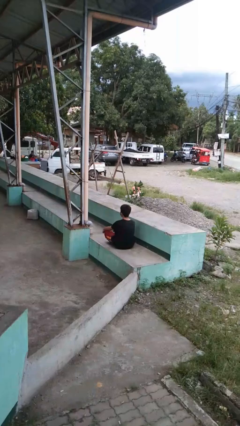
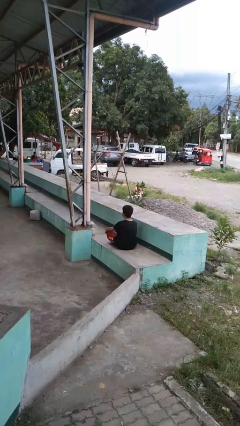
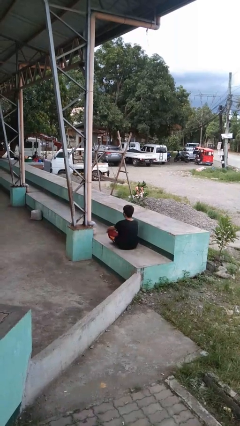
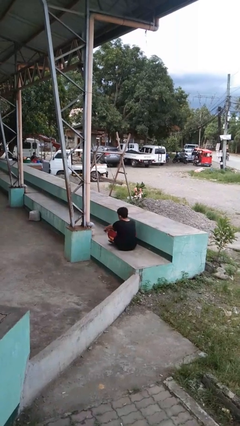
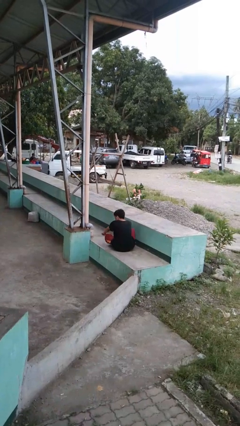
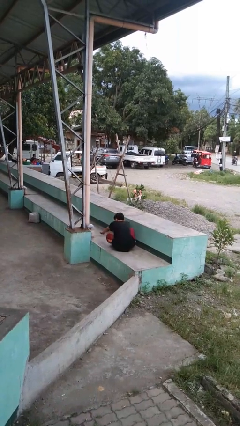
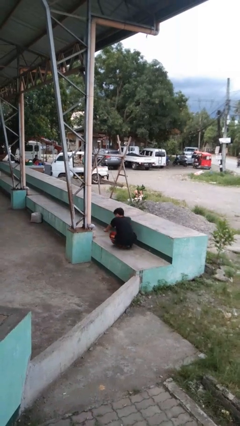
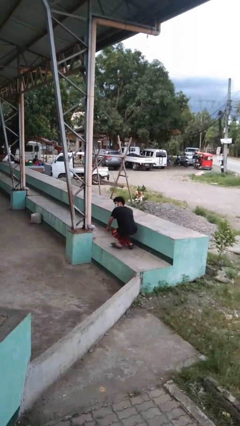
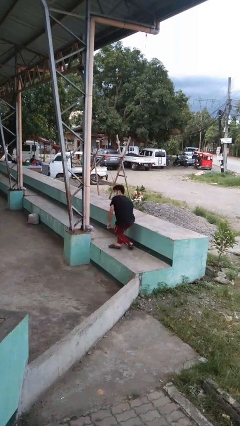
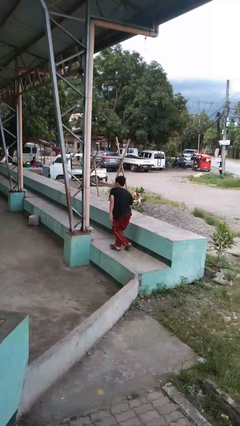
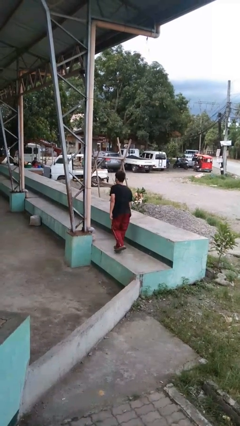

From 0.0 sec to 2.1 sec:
person stands up from floor

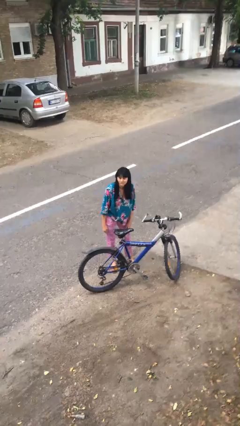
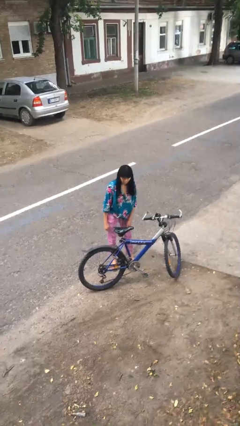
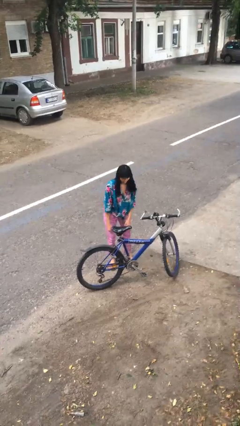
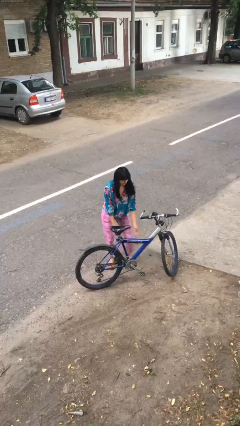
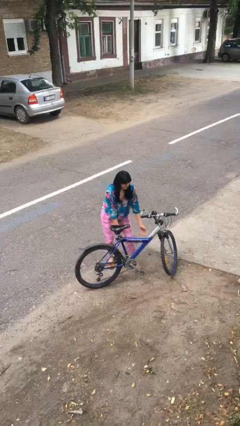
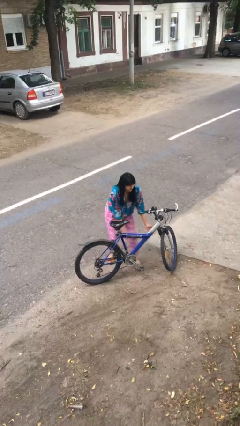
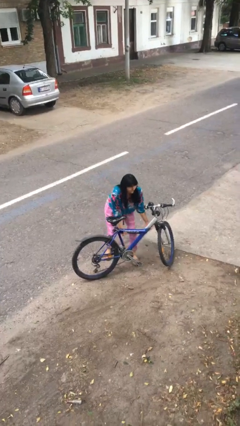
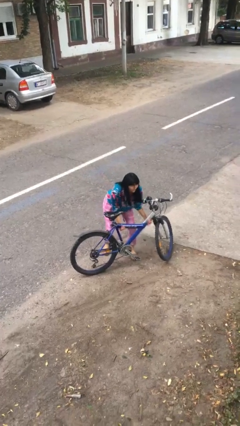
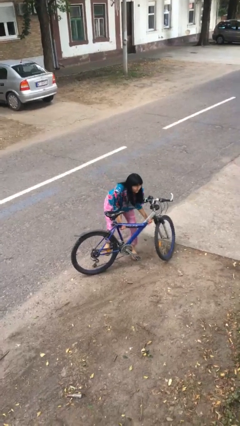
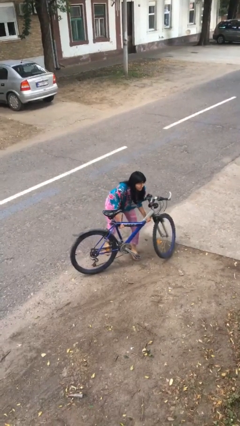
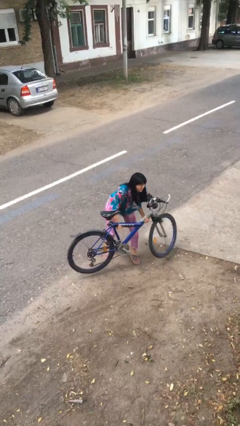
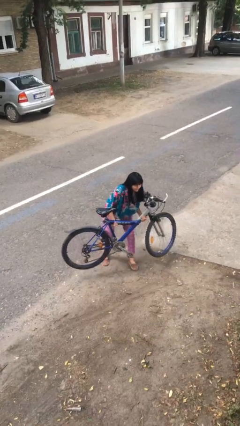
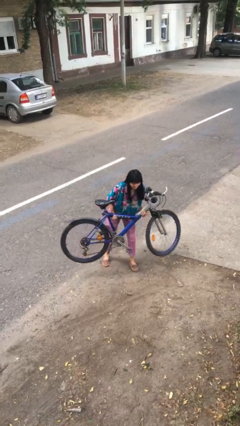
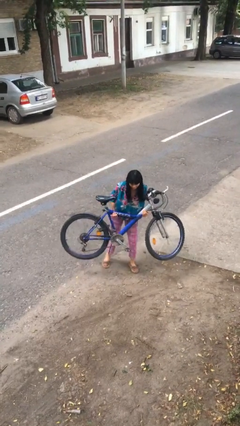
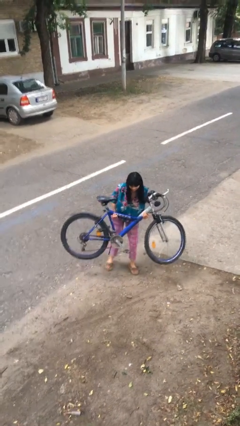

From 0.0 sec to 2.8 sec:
person picks up object from floor

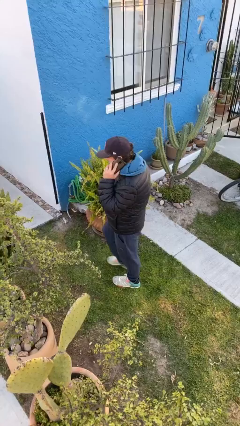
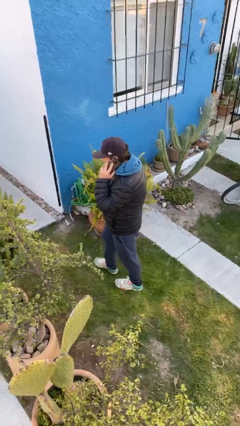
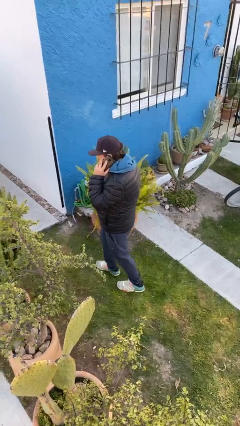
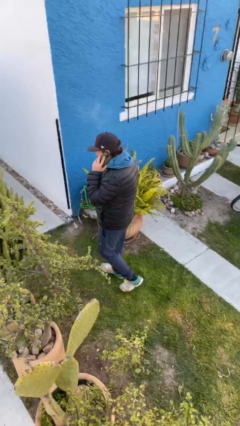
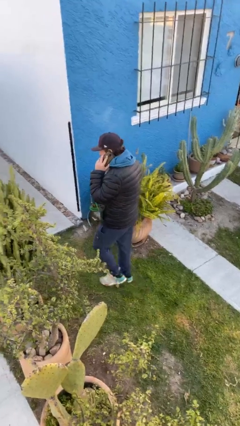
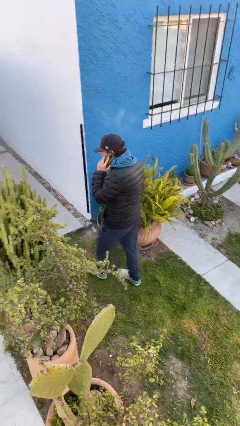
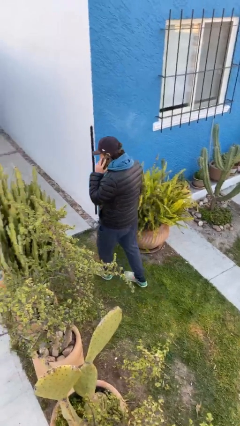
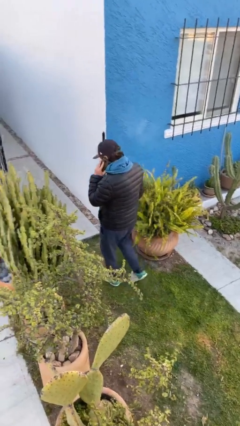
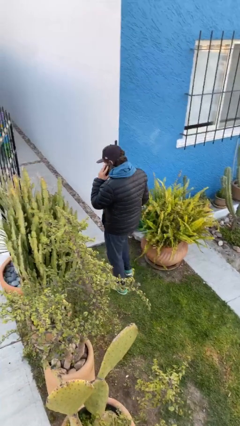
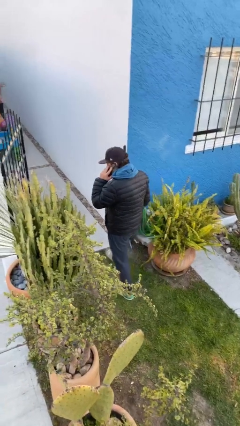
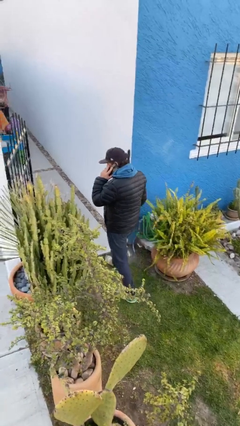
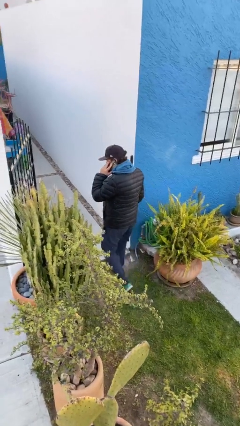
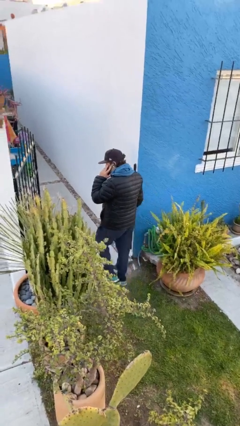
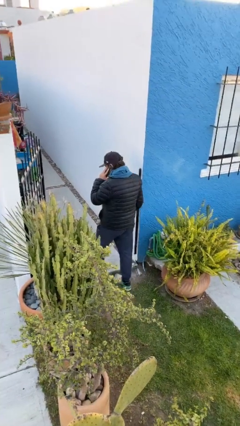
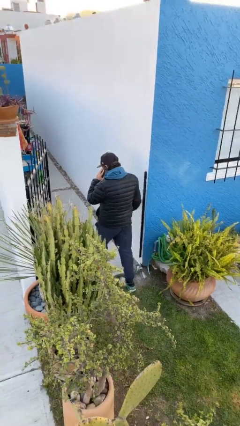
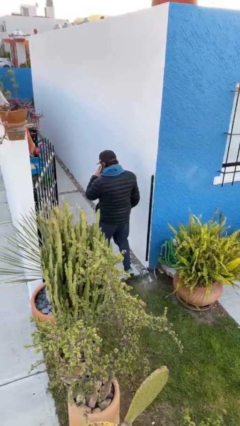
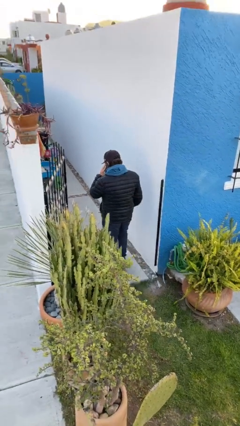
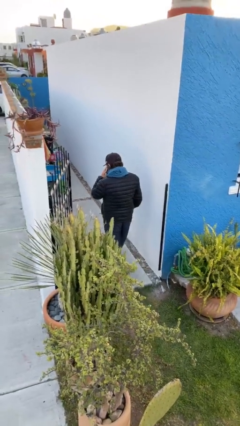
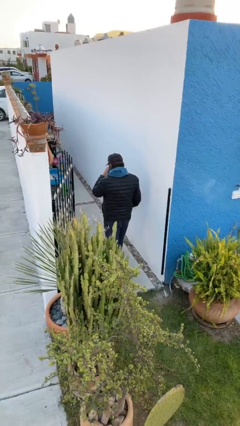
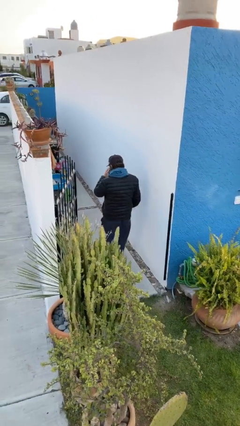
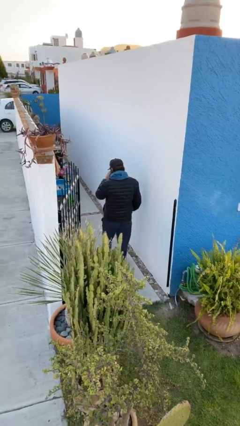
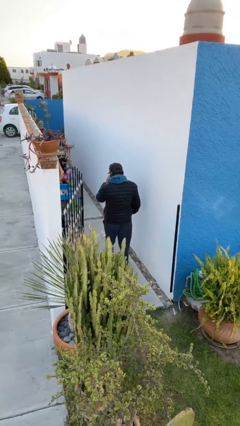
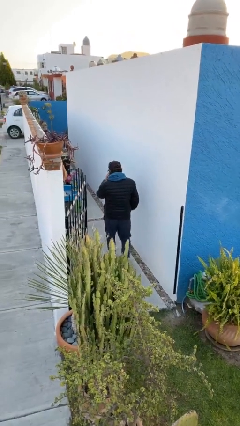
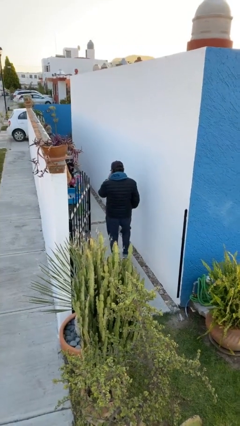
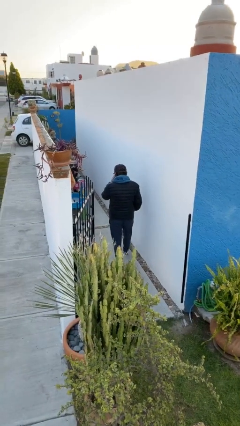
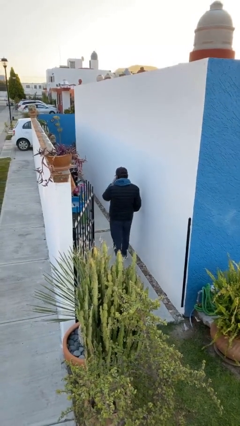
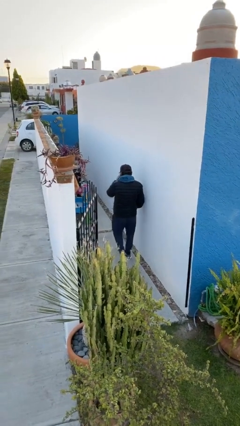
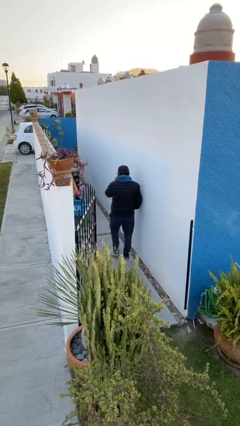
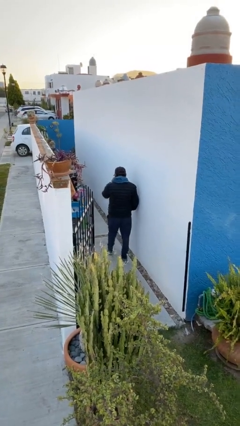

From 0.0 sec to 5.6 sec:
person exits scene through structure

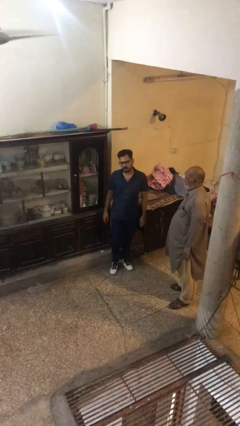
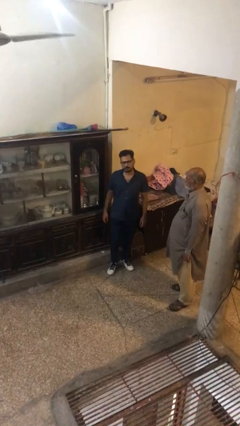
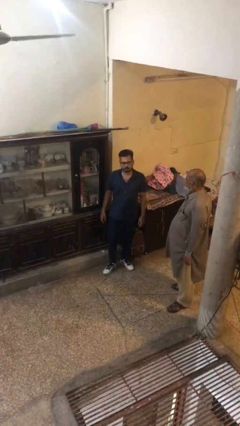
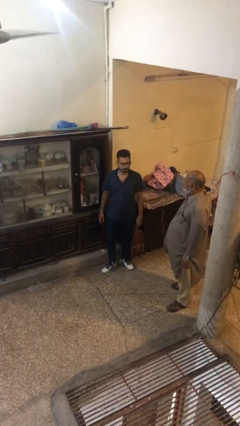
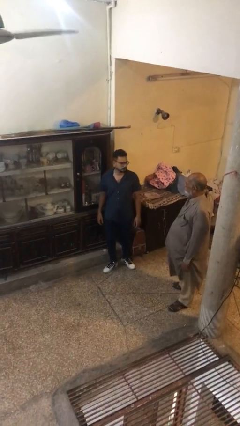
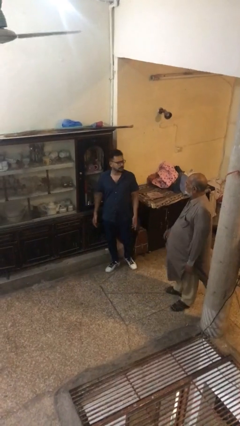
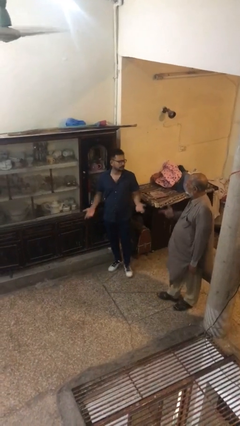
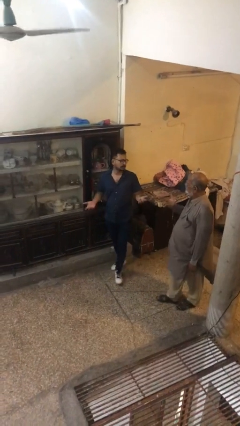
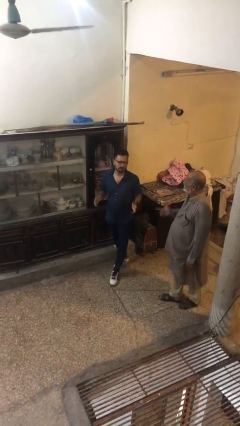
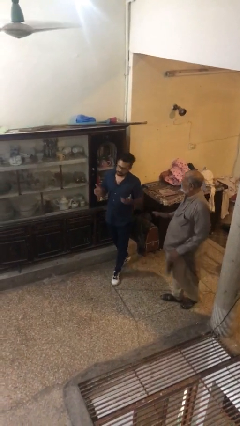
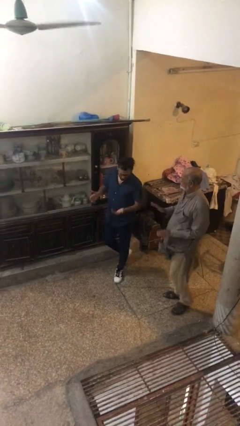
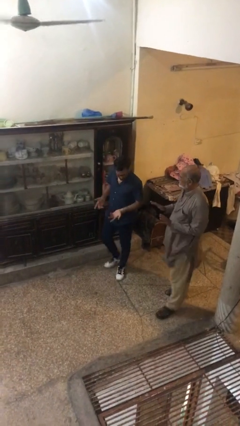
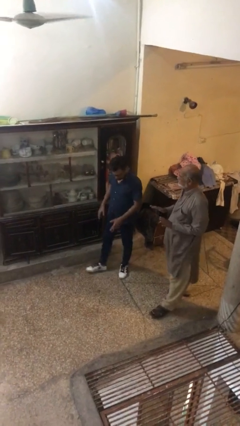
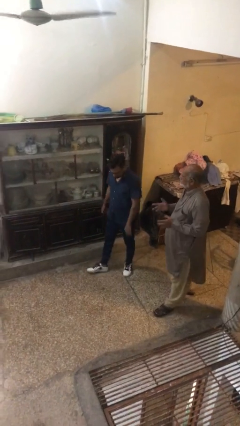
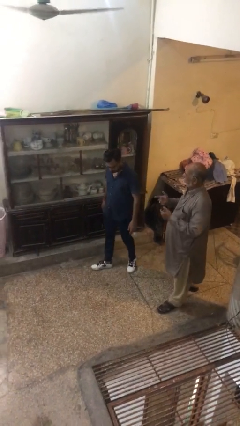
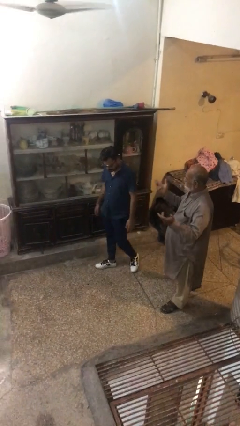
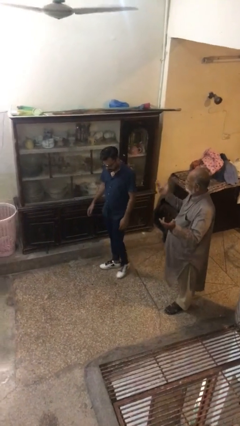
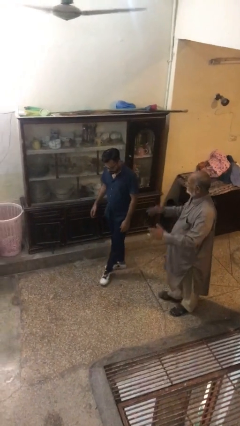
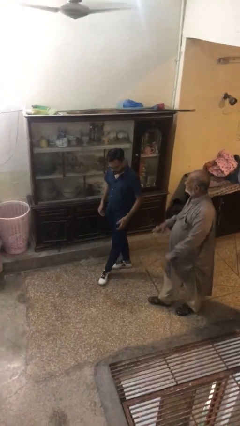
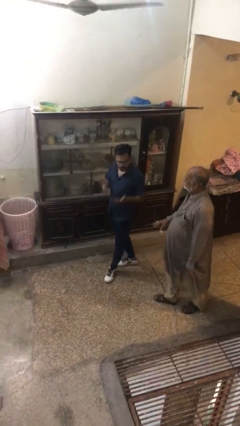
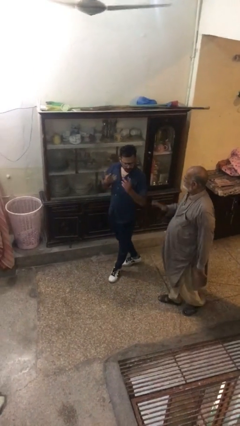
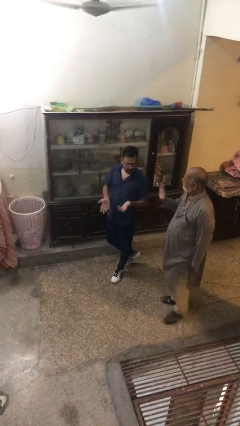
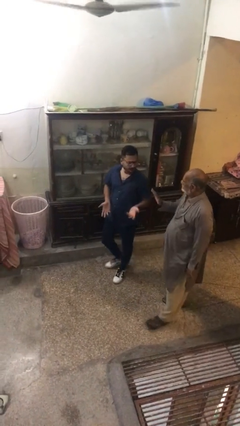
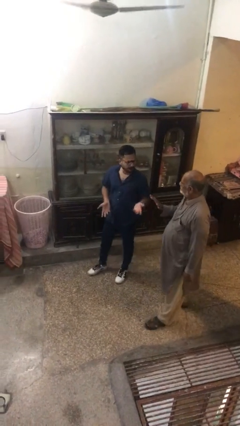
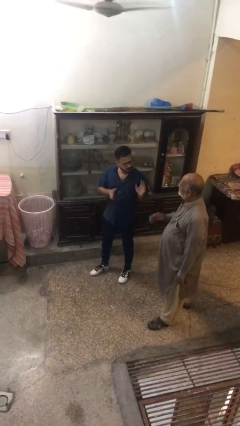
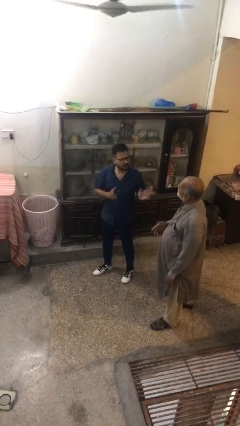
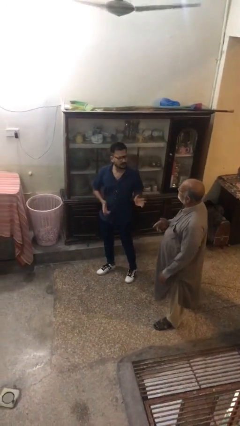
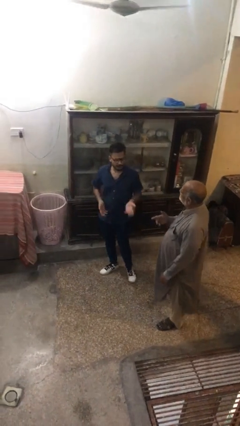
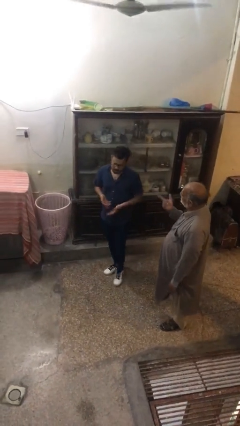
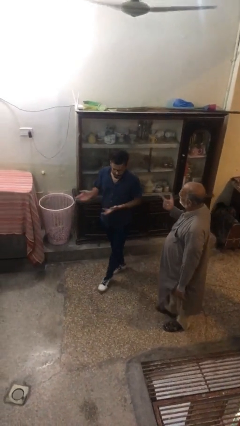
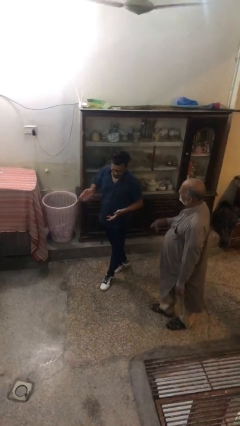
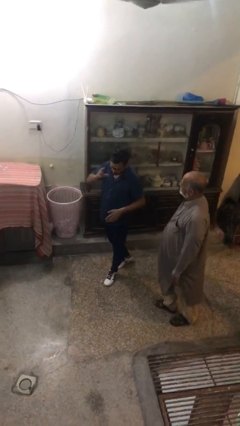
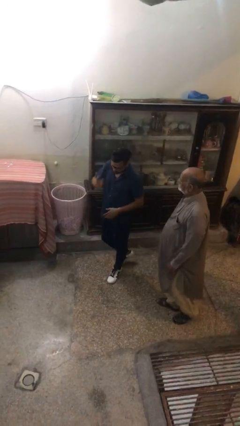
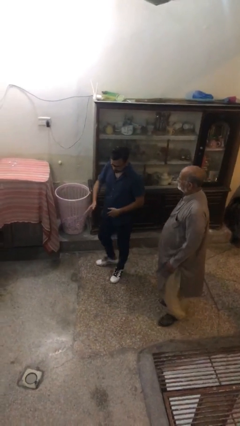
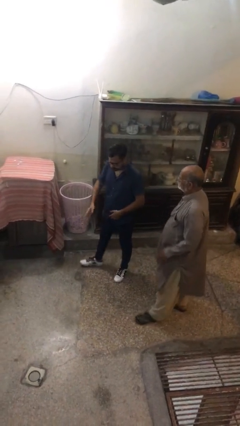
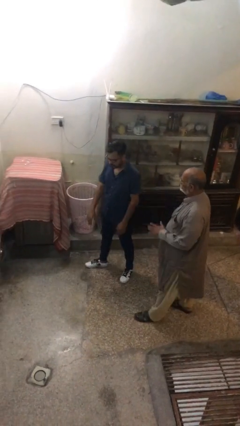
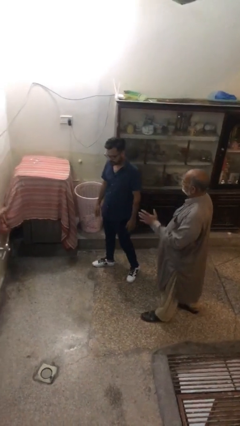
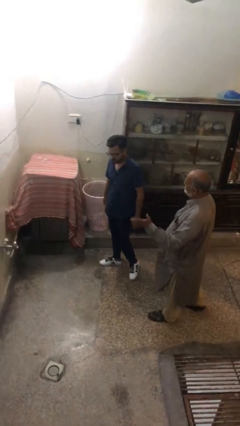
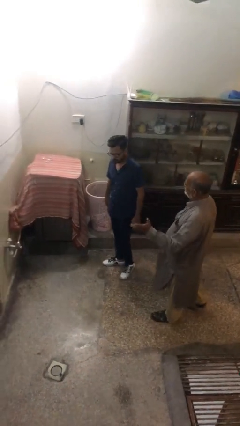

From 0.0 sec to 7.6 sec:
person talks to person
